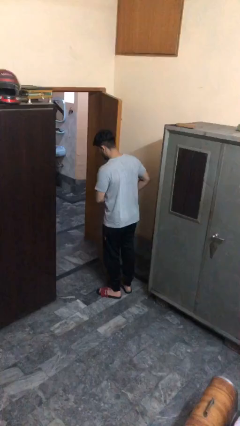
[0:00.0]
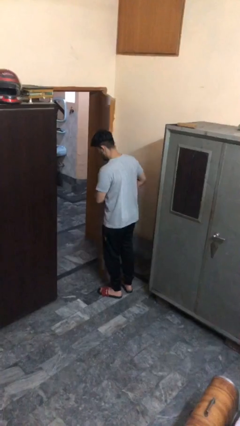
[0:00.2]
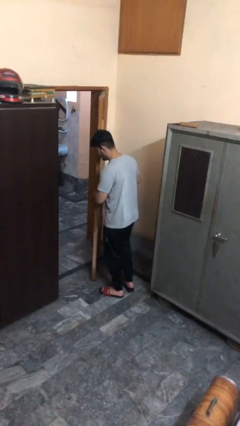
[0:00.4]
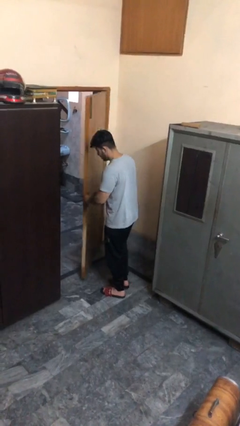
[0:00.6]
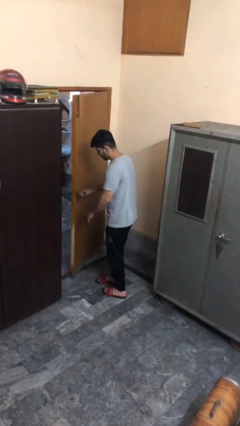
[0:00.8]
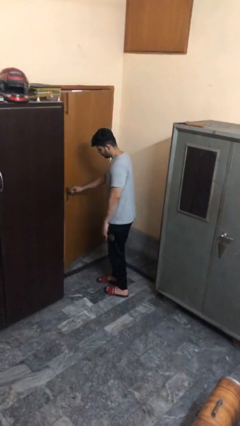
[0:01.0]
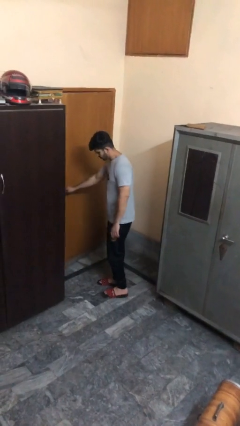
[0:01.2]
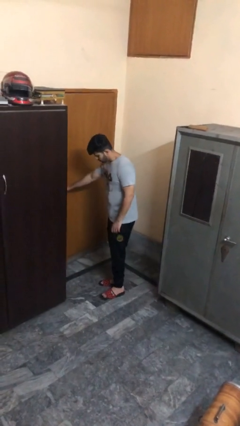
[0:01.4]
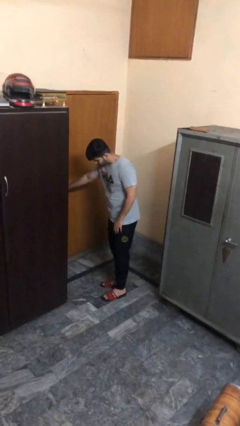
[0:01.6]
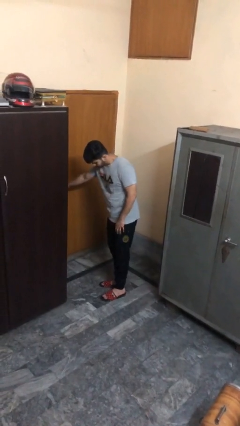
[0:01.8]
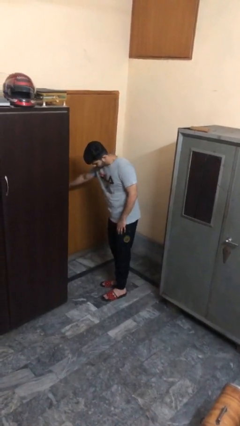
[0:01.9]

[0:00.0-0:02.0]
person closes facility door

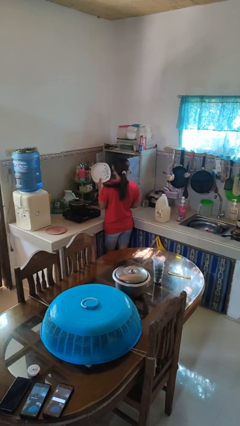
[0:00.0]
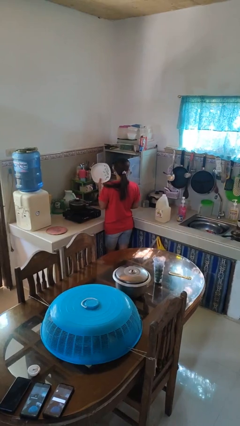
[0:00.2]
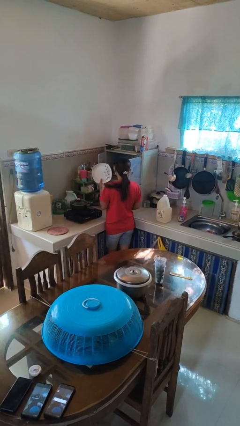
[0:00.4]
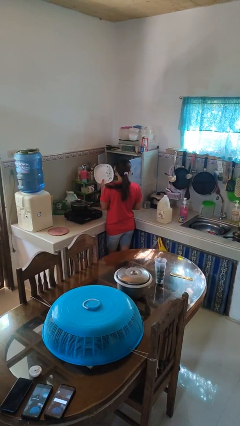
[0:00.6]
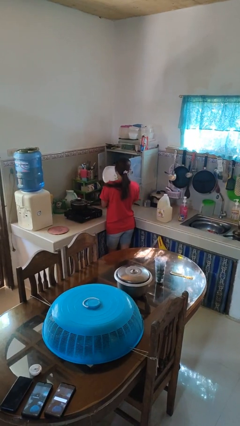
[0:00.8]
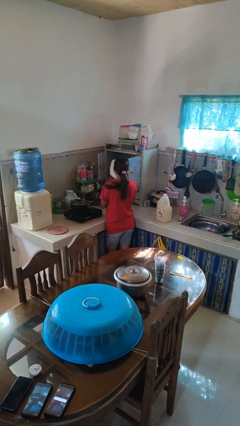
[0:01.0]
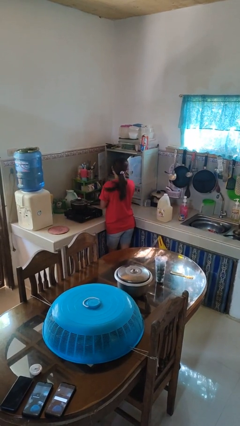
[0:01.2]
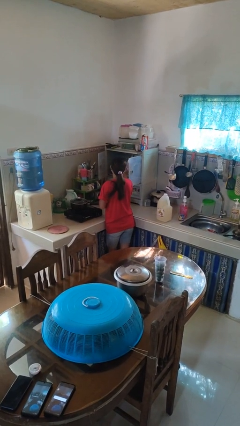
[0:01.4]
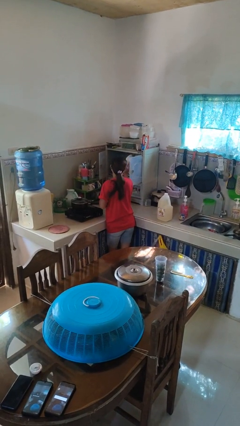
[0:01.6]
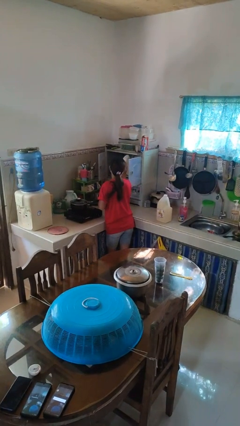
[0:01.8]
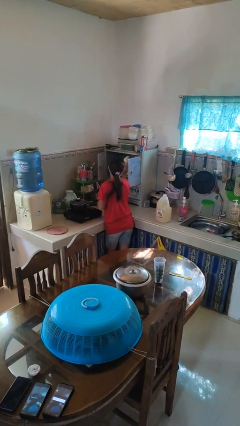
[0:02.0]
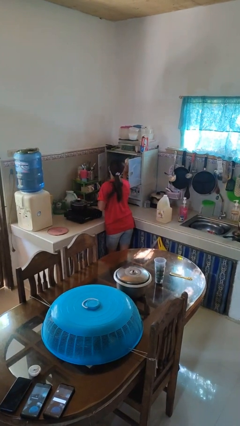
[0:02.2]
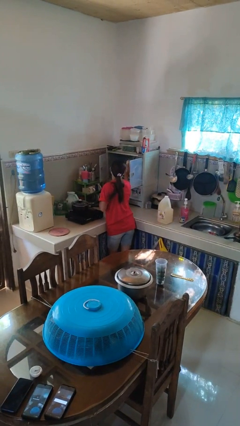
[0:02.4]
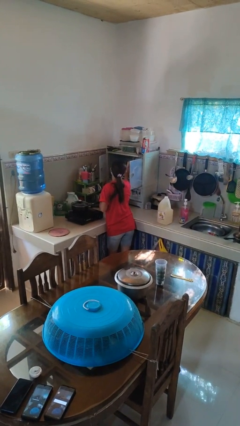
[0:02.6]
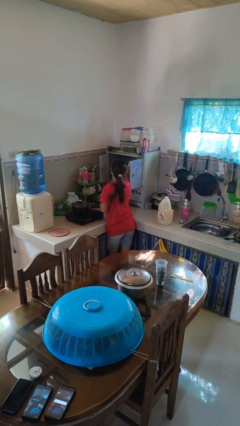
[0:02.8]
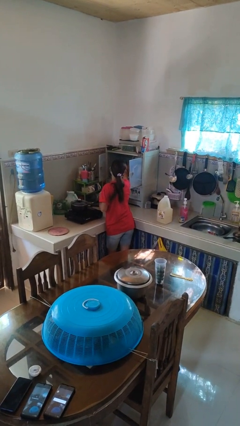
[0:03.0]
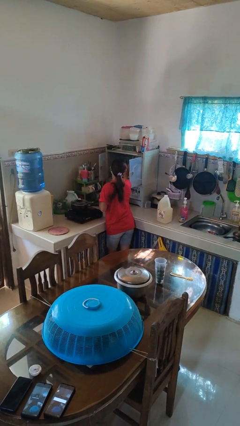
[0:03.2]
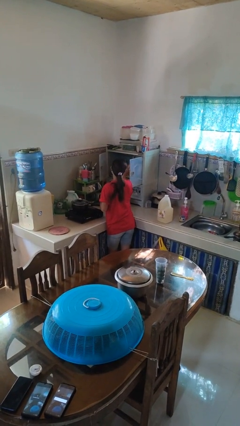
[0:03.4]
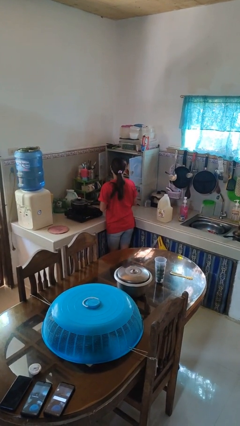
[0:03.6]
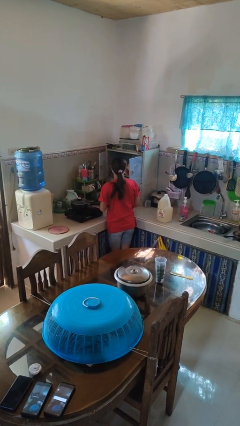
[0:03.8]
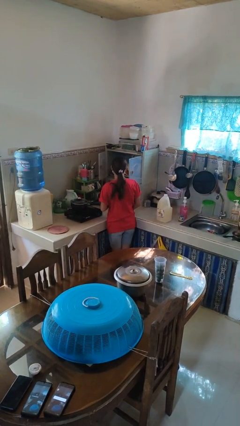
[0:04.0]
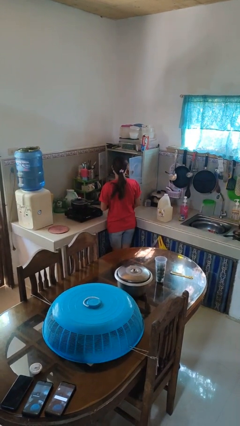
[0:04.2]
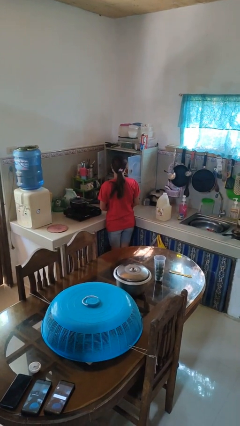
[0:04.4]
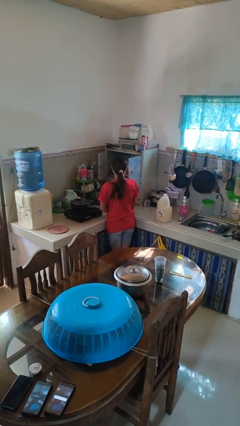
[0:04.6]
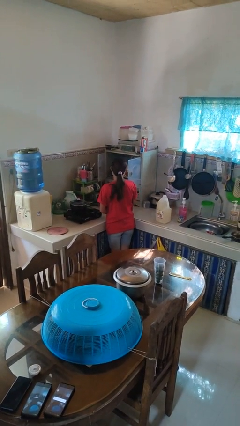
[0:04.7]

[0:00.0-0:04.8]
person puts object in cabinet

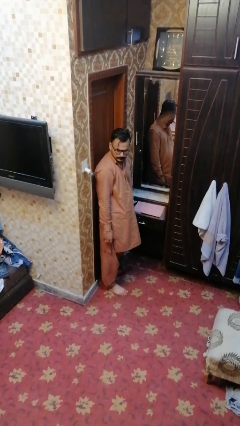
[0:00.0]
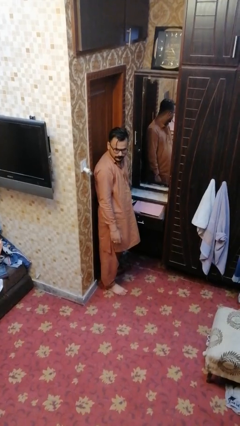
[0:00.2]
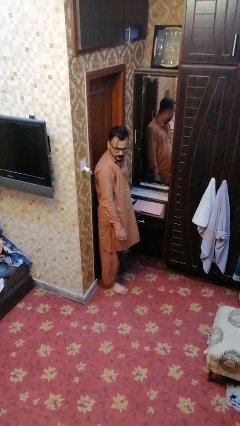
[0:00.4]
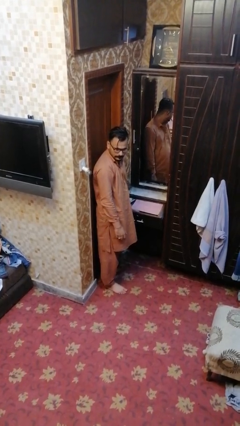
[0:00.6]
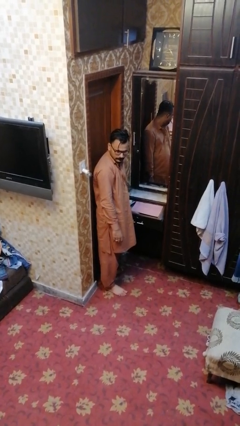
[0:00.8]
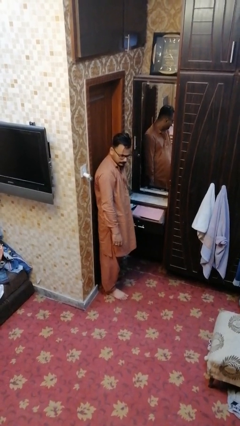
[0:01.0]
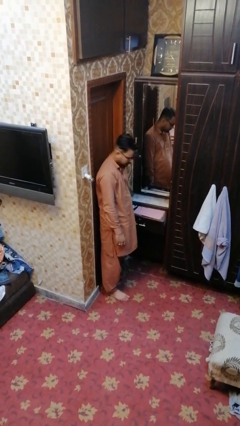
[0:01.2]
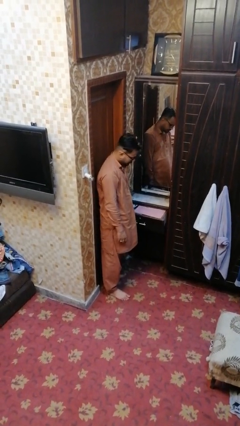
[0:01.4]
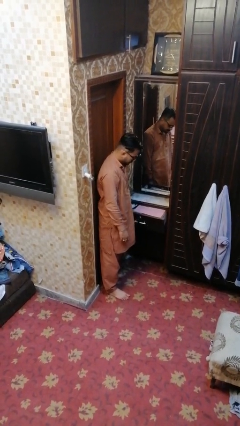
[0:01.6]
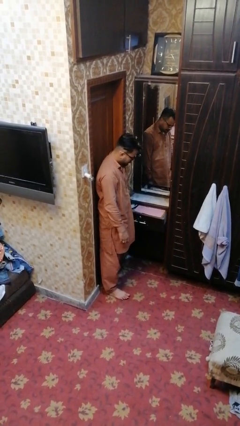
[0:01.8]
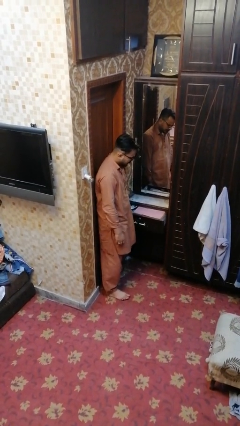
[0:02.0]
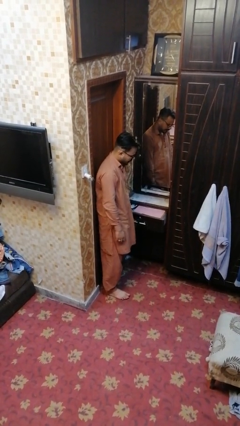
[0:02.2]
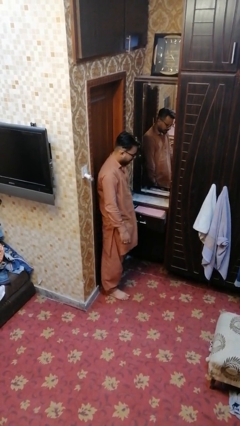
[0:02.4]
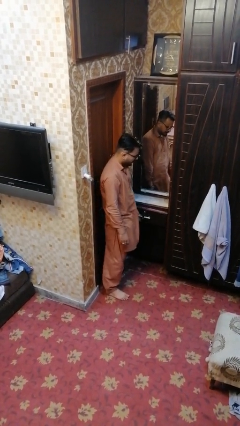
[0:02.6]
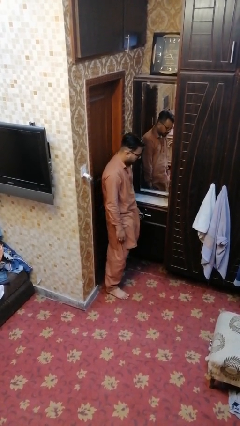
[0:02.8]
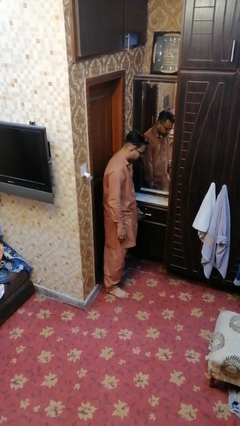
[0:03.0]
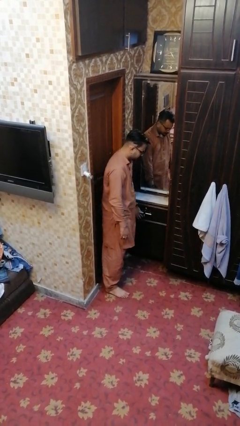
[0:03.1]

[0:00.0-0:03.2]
person closes dresser drawer

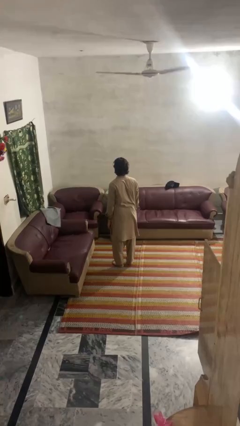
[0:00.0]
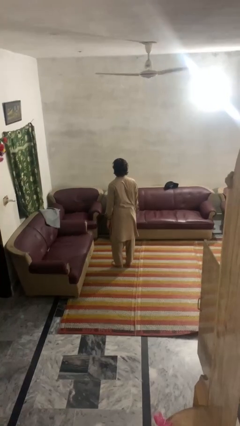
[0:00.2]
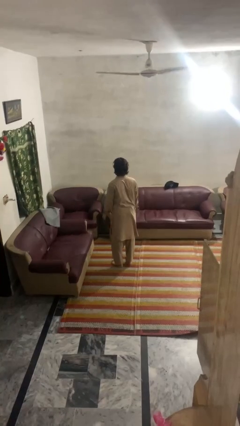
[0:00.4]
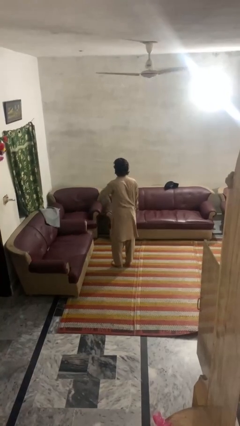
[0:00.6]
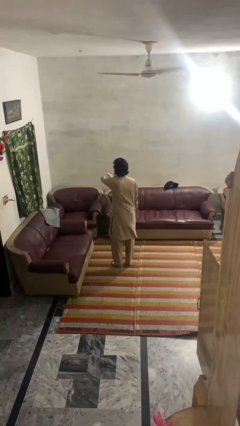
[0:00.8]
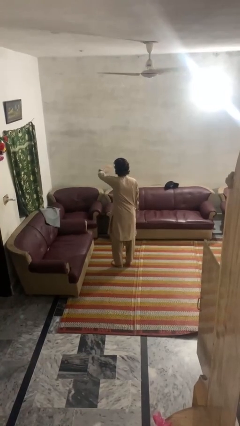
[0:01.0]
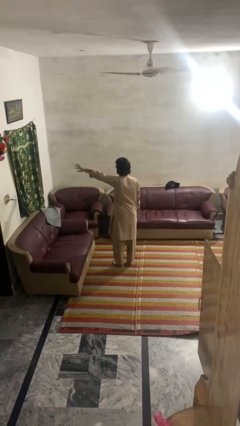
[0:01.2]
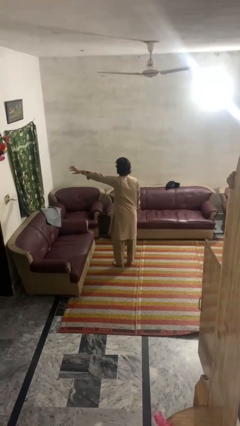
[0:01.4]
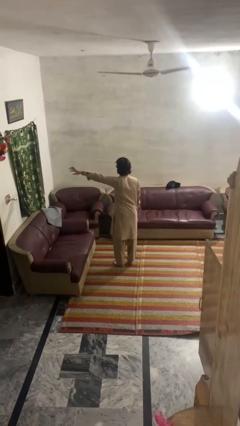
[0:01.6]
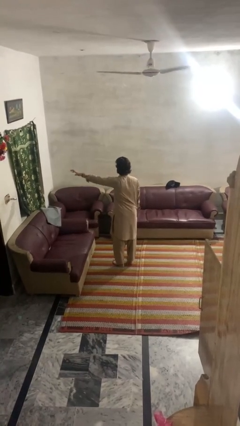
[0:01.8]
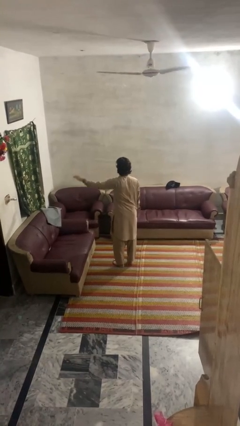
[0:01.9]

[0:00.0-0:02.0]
person gestures swipe left

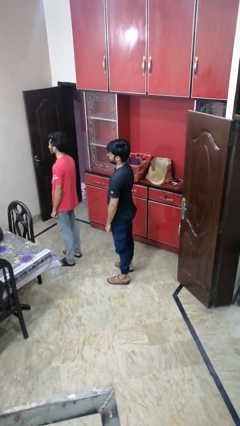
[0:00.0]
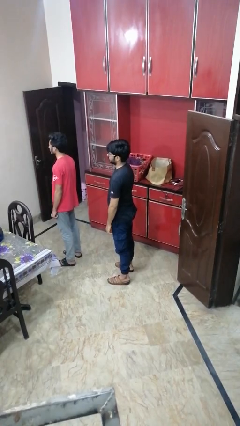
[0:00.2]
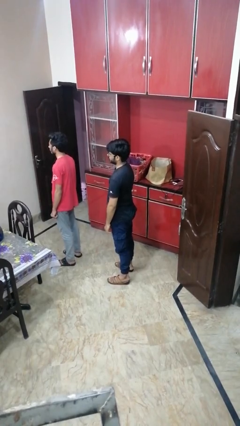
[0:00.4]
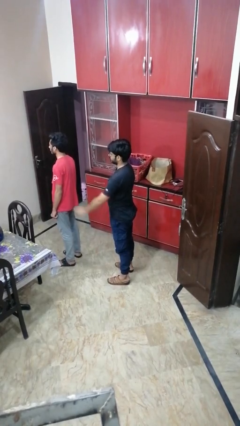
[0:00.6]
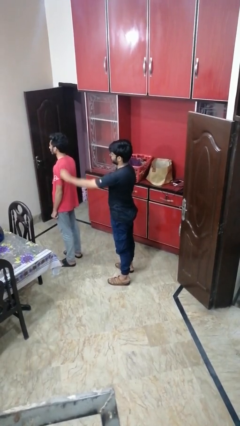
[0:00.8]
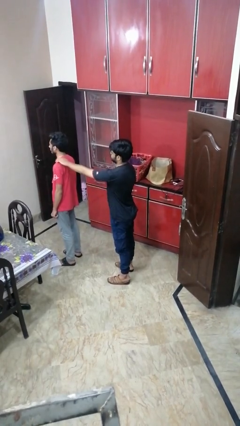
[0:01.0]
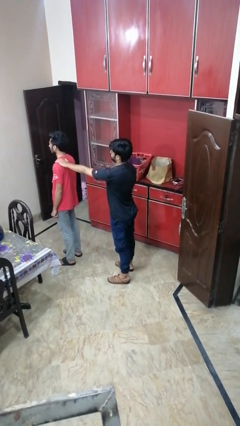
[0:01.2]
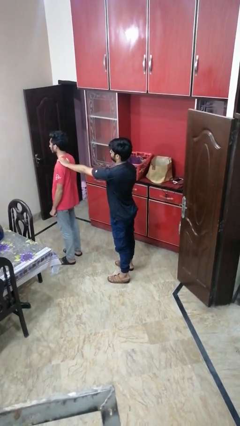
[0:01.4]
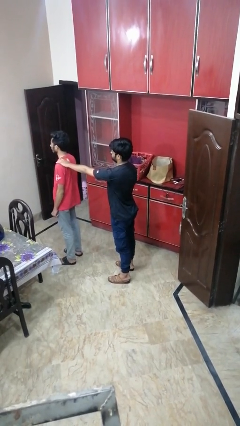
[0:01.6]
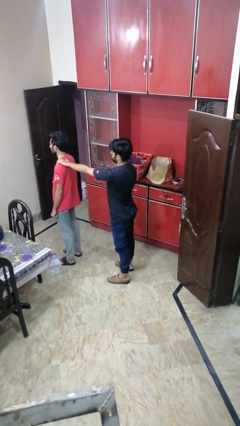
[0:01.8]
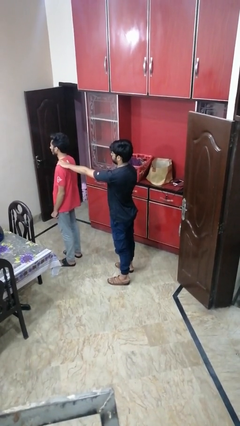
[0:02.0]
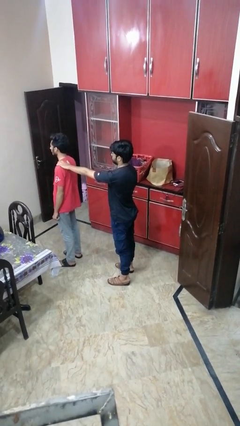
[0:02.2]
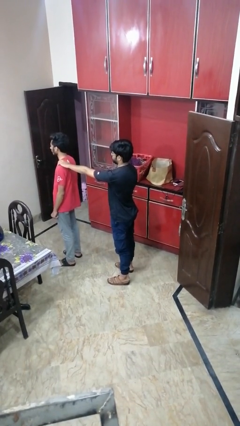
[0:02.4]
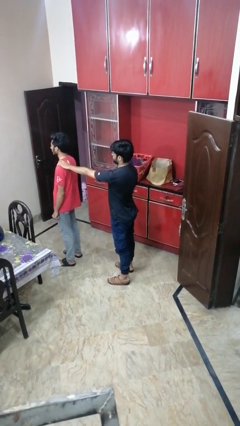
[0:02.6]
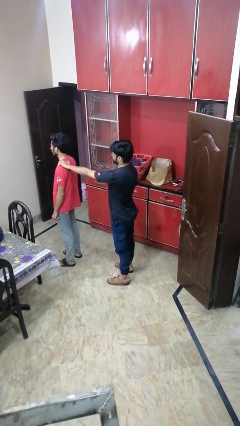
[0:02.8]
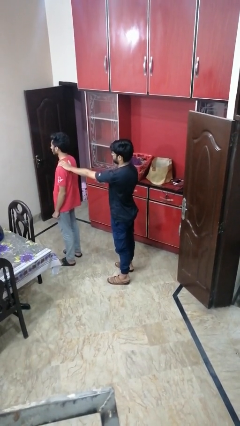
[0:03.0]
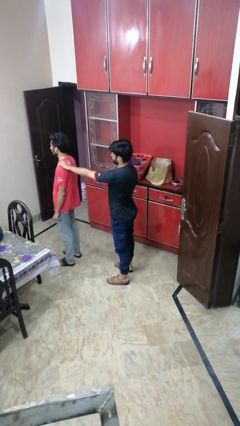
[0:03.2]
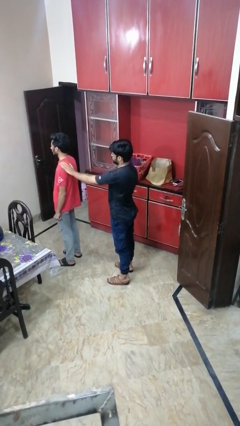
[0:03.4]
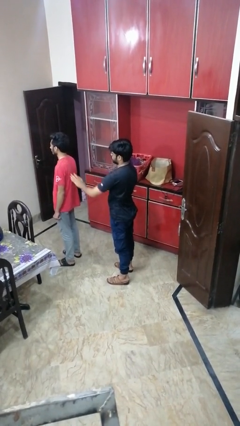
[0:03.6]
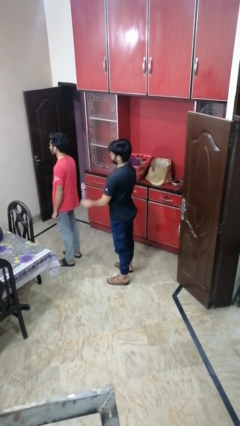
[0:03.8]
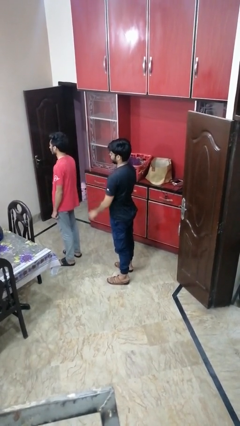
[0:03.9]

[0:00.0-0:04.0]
person touches back of person

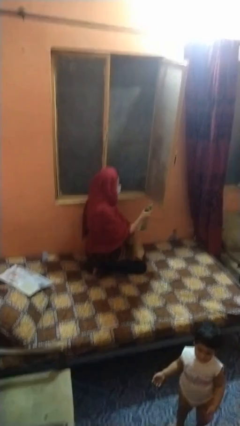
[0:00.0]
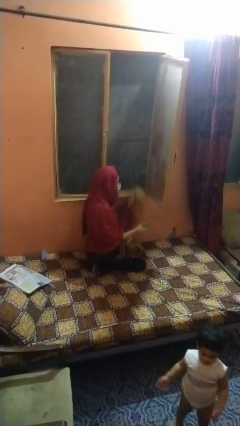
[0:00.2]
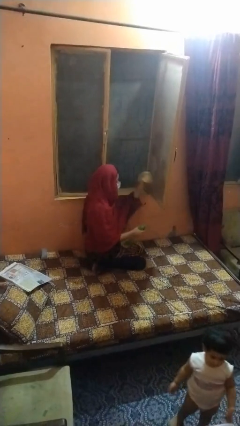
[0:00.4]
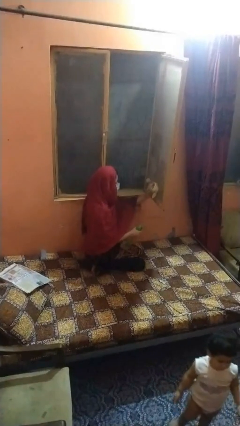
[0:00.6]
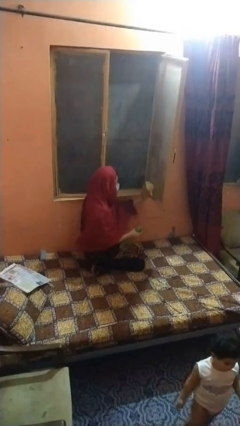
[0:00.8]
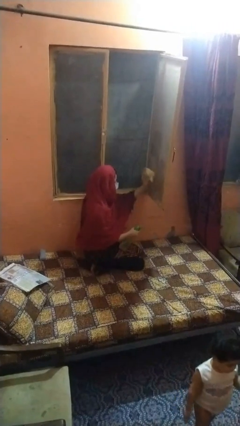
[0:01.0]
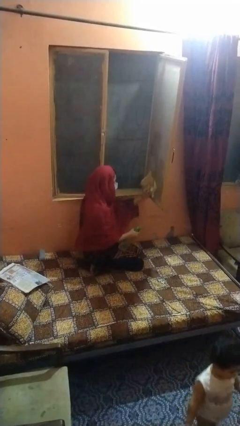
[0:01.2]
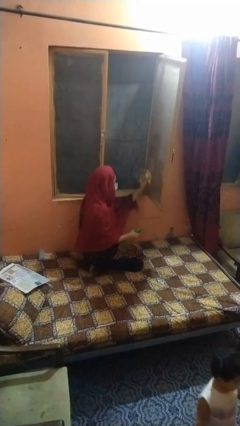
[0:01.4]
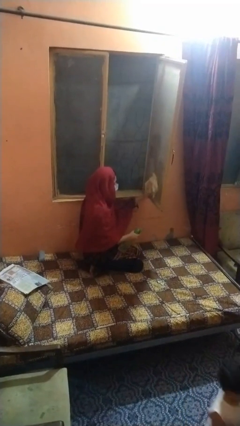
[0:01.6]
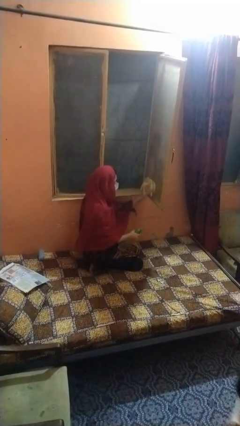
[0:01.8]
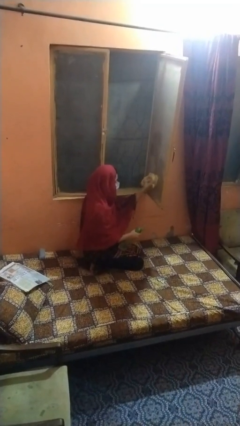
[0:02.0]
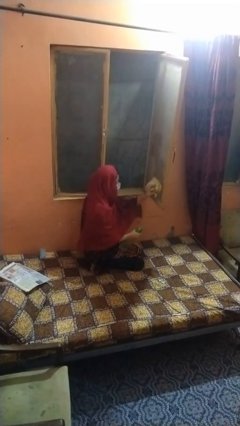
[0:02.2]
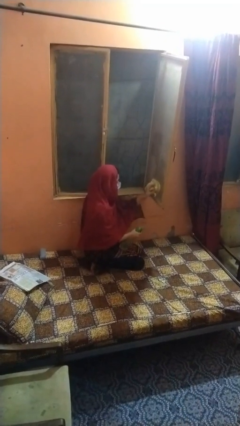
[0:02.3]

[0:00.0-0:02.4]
person washes window
